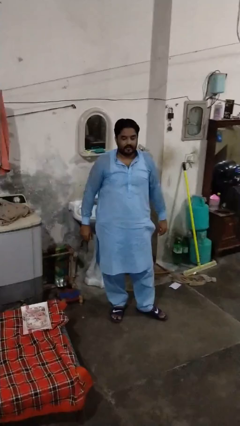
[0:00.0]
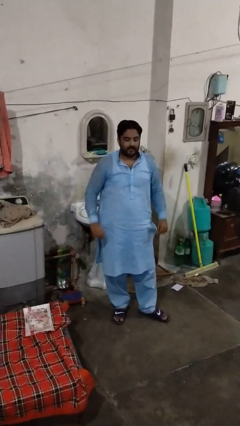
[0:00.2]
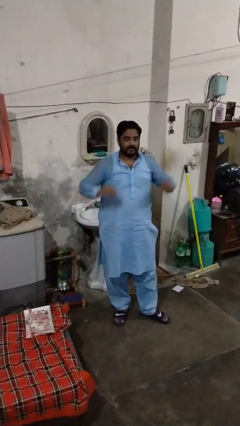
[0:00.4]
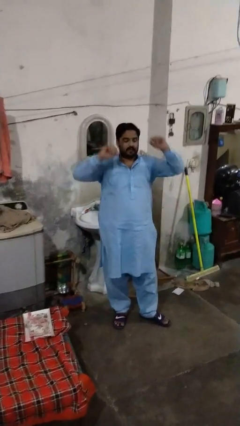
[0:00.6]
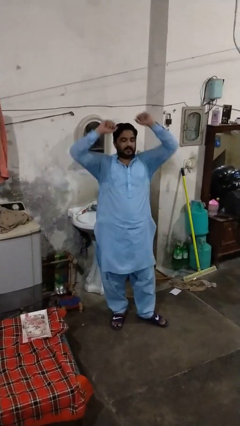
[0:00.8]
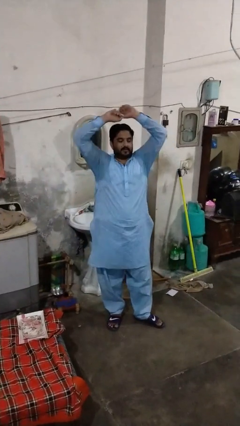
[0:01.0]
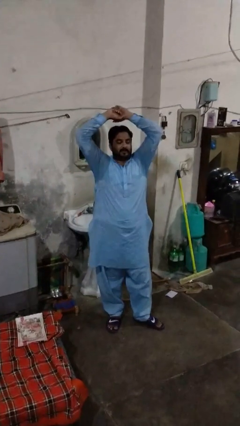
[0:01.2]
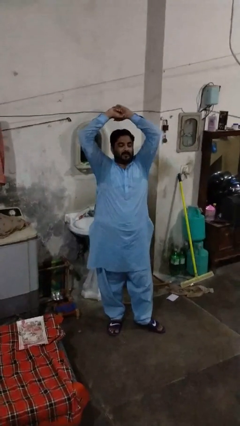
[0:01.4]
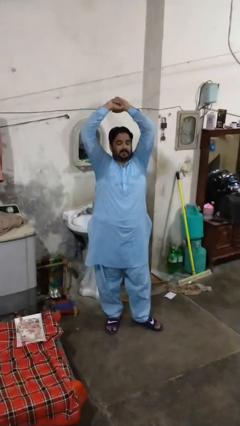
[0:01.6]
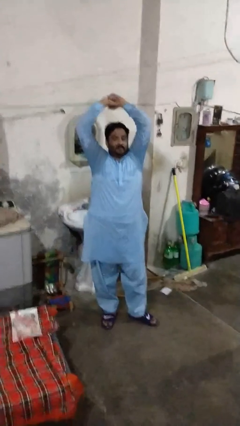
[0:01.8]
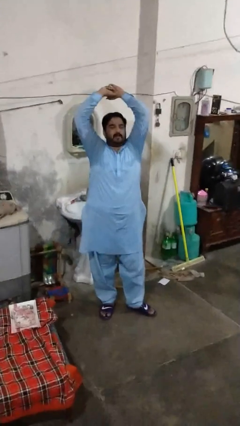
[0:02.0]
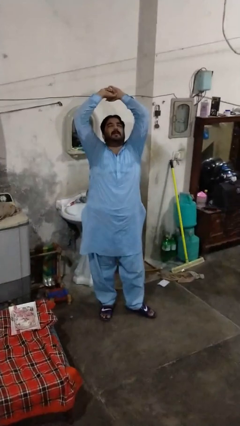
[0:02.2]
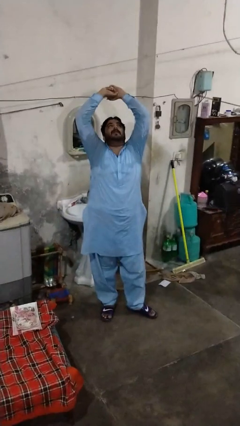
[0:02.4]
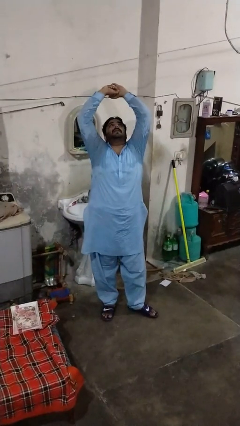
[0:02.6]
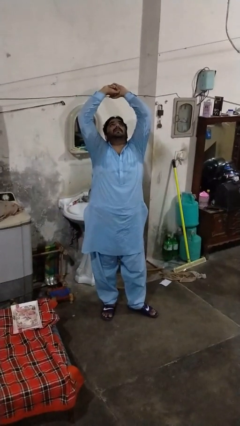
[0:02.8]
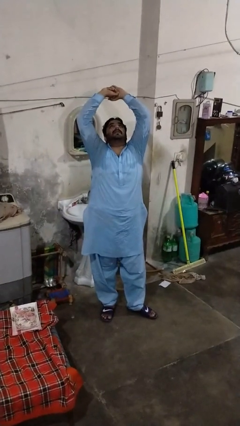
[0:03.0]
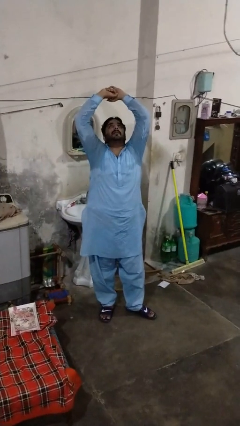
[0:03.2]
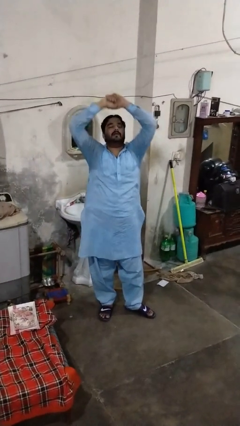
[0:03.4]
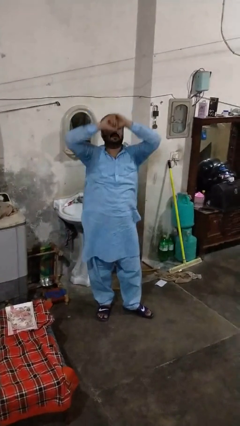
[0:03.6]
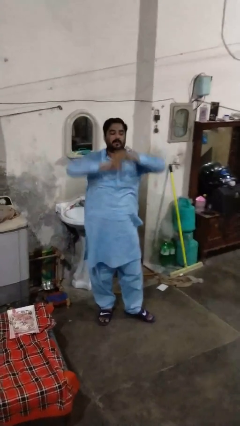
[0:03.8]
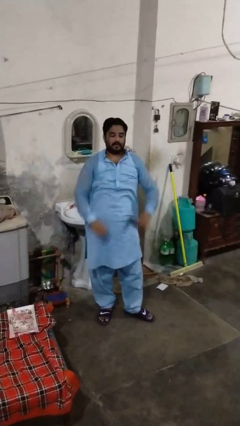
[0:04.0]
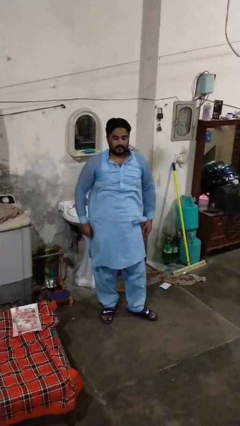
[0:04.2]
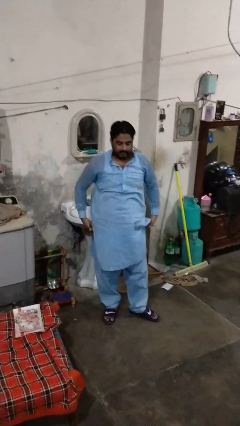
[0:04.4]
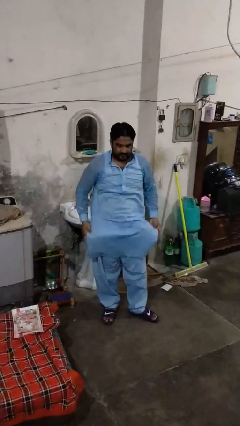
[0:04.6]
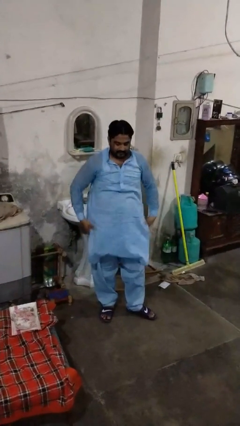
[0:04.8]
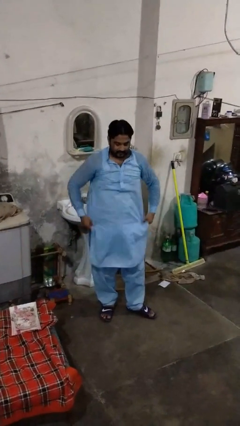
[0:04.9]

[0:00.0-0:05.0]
person stretches arms over head

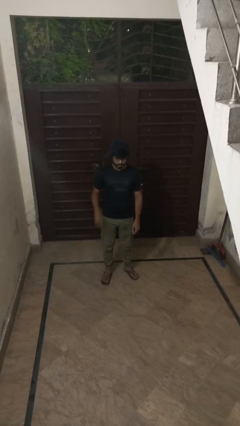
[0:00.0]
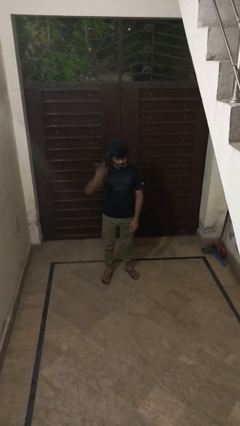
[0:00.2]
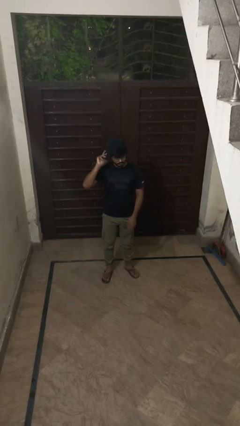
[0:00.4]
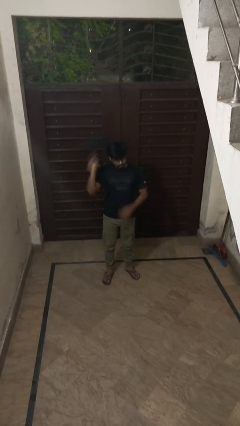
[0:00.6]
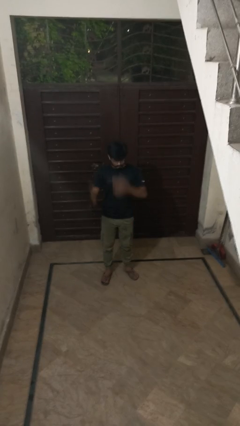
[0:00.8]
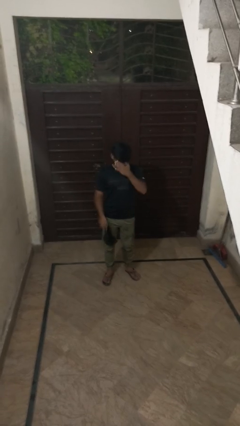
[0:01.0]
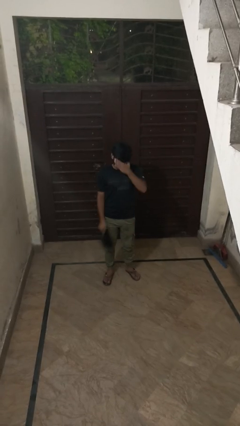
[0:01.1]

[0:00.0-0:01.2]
person takes off hat

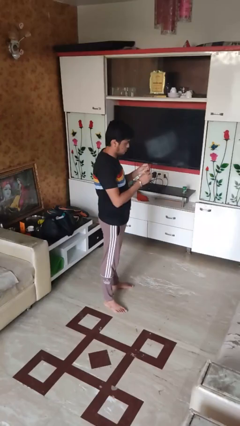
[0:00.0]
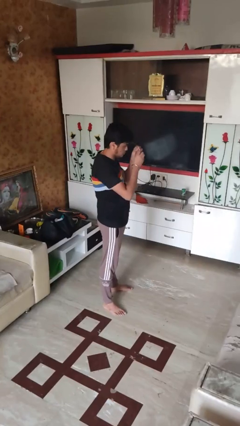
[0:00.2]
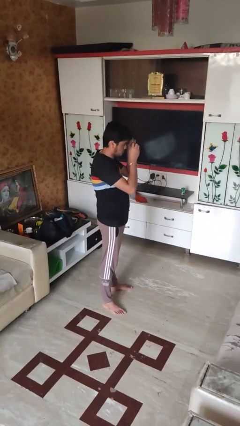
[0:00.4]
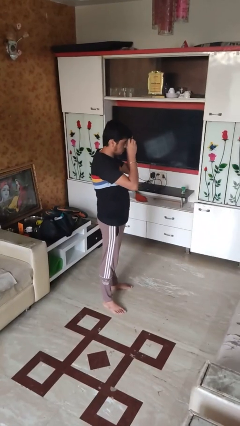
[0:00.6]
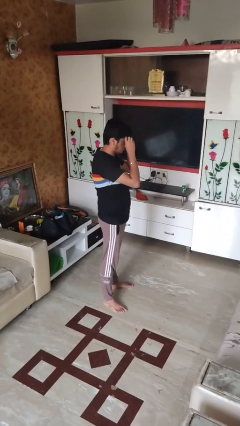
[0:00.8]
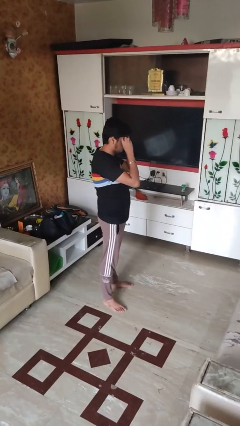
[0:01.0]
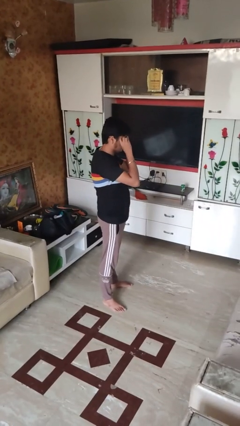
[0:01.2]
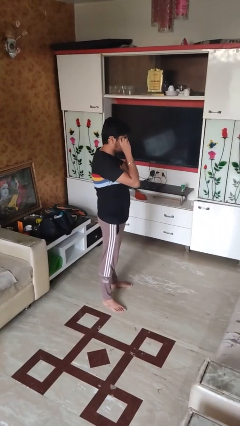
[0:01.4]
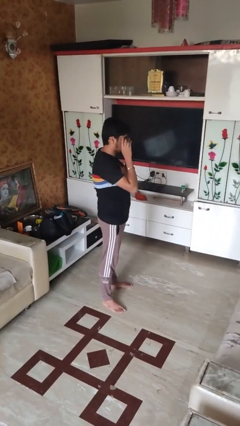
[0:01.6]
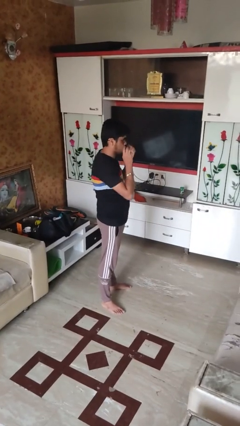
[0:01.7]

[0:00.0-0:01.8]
person puts on sunglasses

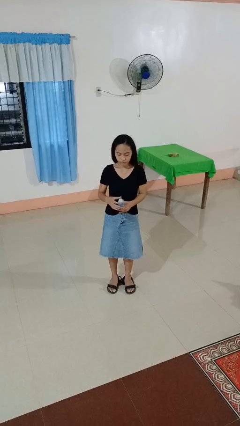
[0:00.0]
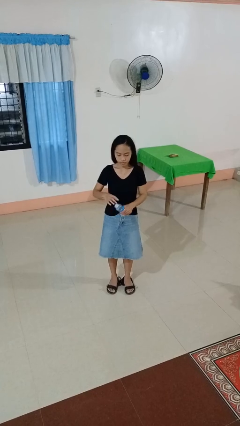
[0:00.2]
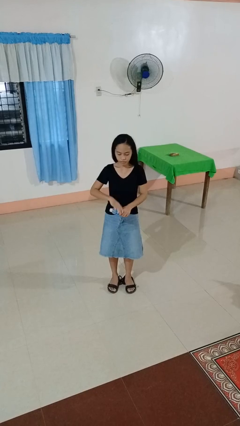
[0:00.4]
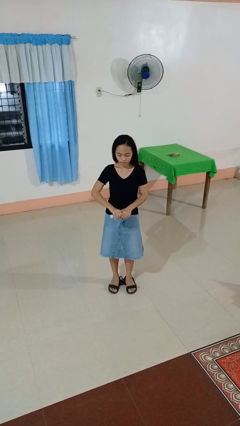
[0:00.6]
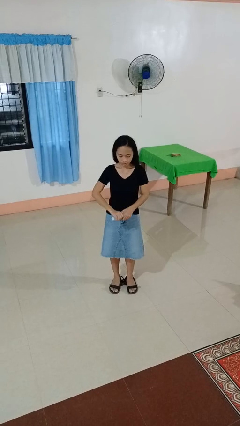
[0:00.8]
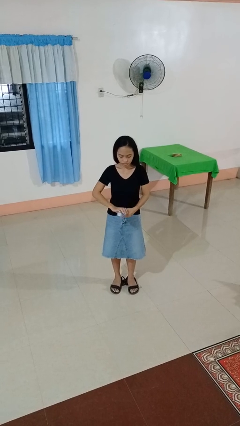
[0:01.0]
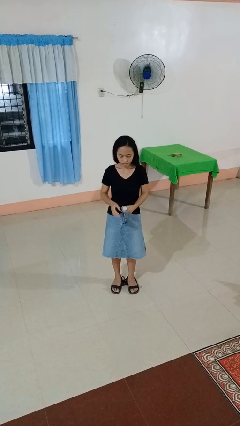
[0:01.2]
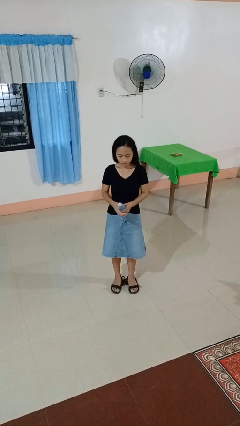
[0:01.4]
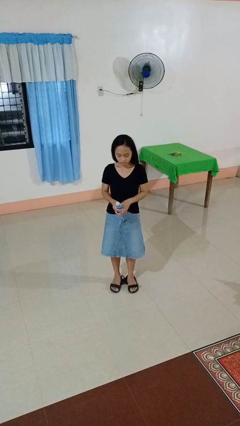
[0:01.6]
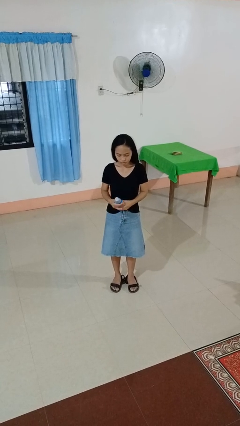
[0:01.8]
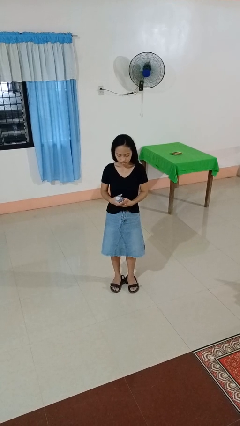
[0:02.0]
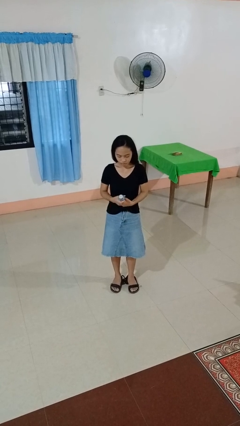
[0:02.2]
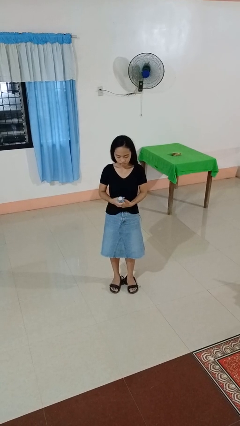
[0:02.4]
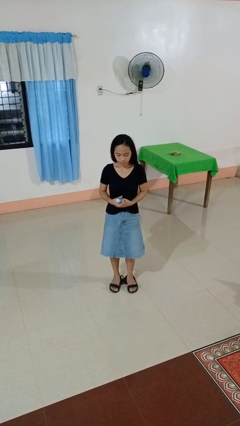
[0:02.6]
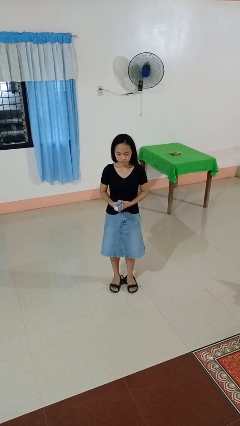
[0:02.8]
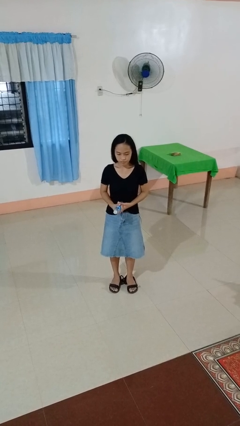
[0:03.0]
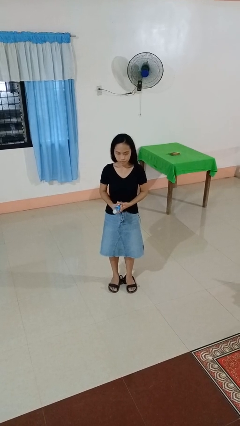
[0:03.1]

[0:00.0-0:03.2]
person squeezes object

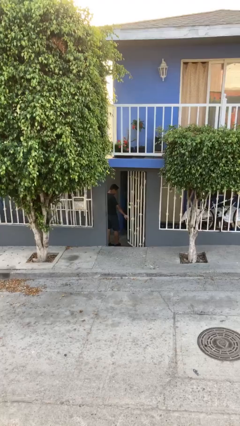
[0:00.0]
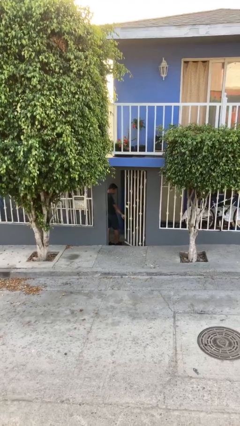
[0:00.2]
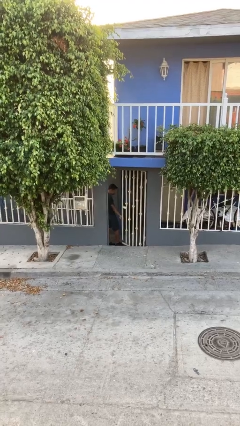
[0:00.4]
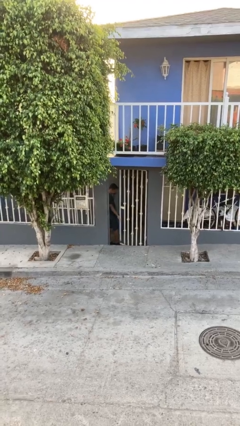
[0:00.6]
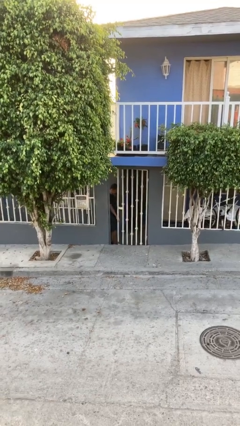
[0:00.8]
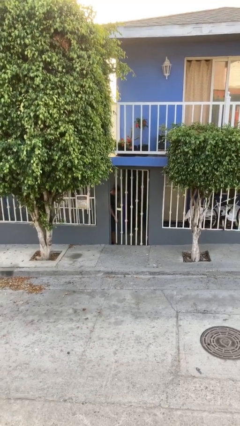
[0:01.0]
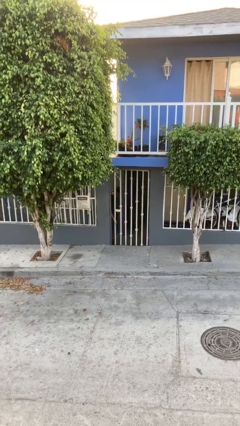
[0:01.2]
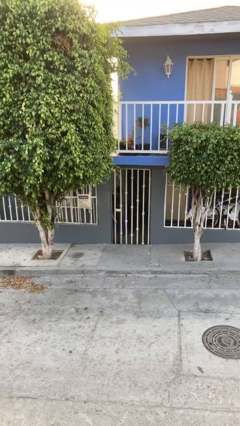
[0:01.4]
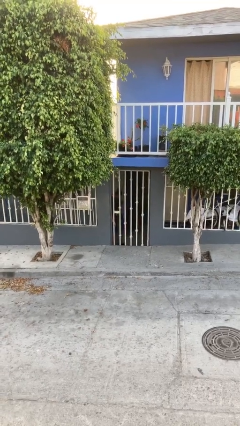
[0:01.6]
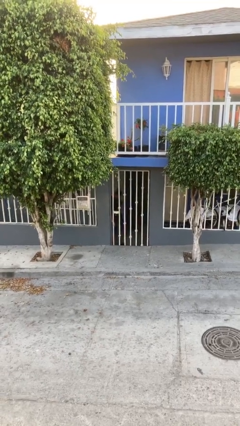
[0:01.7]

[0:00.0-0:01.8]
person closes facility door

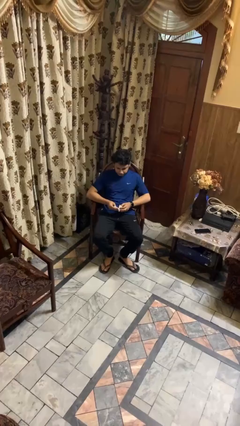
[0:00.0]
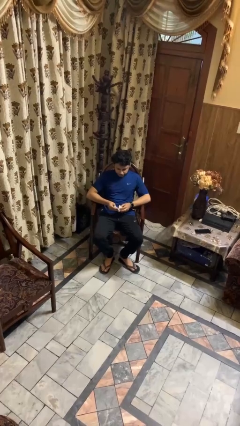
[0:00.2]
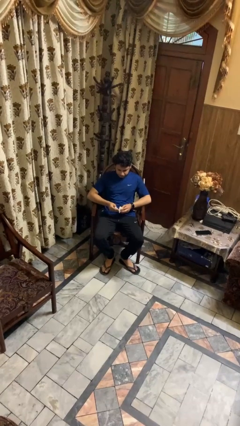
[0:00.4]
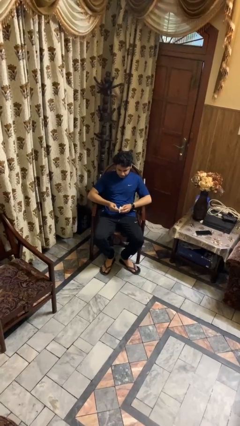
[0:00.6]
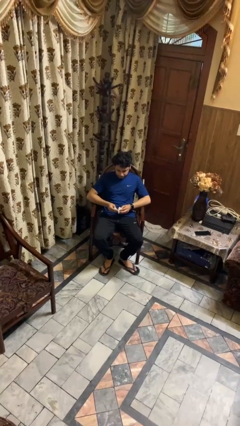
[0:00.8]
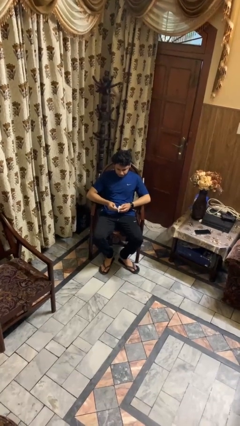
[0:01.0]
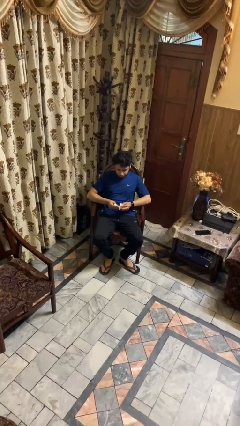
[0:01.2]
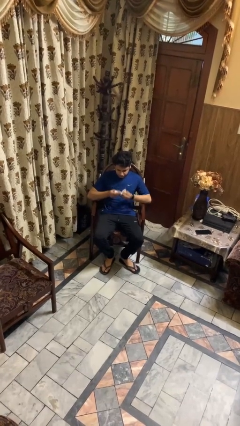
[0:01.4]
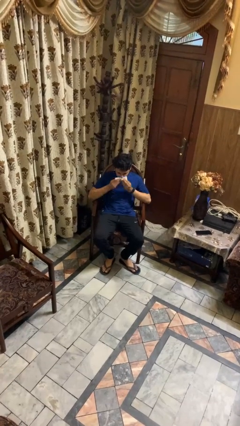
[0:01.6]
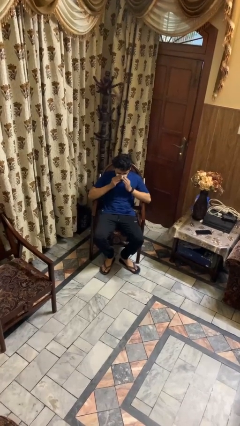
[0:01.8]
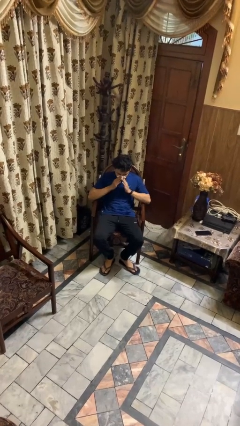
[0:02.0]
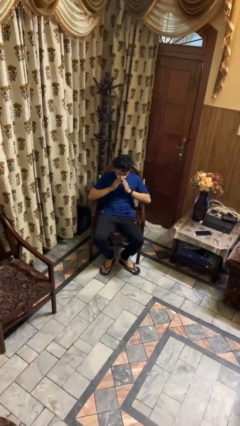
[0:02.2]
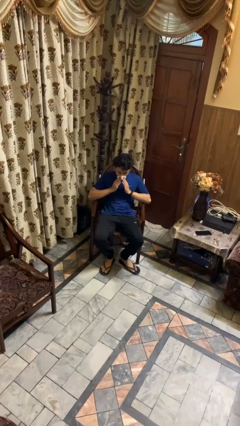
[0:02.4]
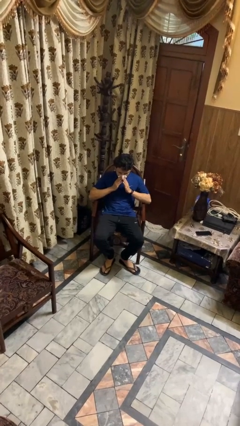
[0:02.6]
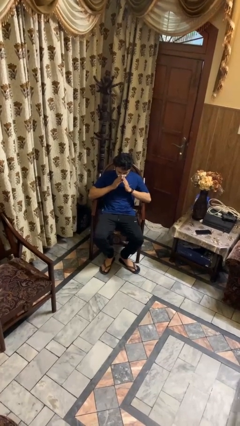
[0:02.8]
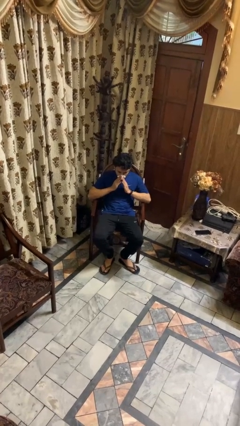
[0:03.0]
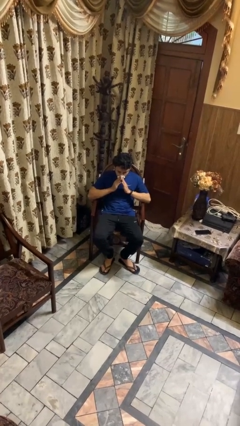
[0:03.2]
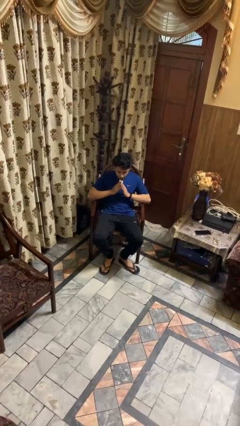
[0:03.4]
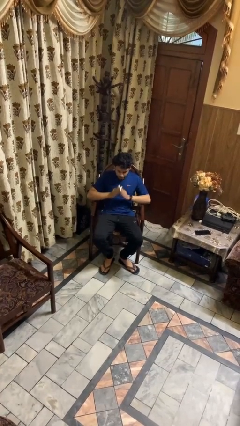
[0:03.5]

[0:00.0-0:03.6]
person blows nose

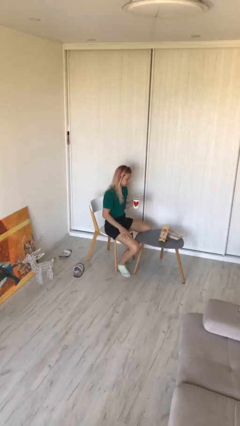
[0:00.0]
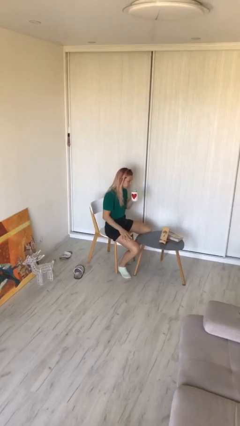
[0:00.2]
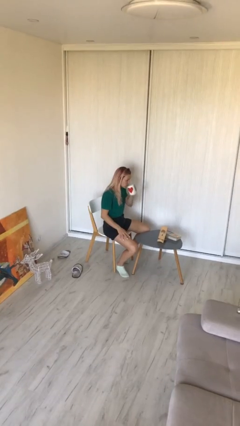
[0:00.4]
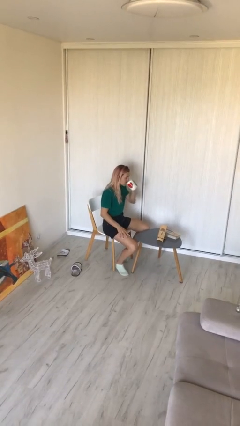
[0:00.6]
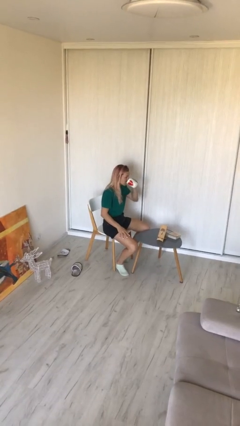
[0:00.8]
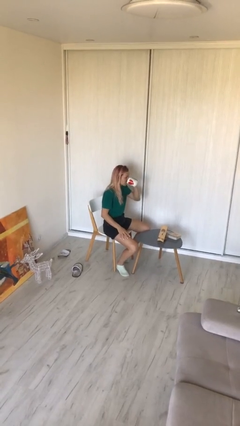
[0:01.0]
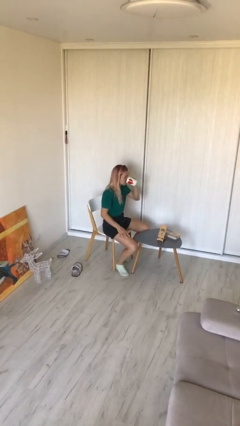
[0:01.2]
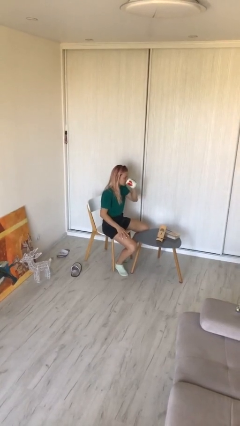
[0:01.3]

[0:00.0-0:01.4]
person drinks from mug
